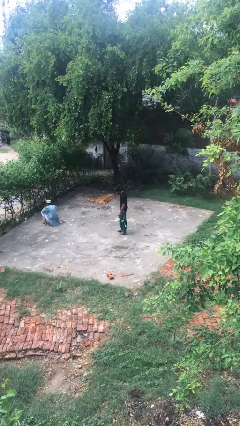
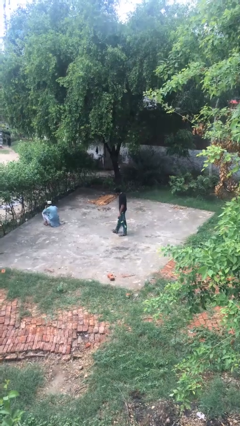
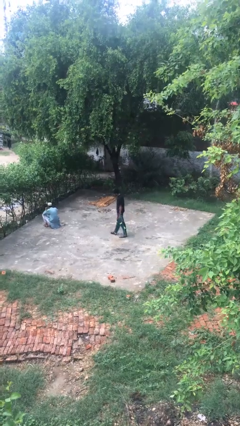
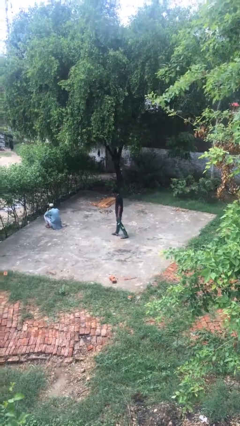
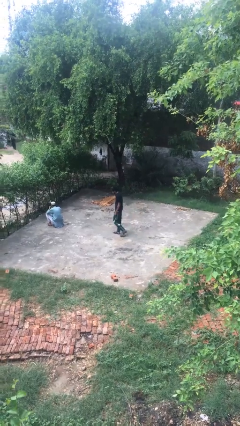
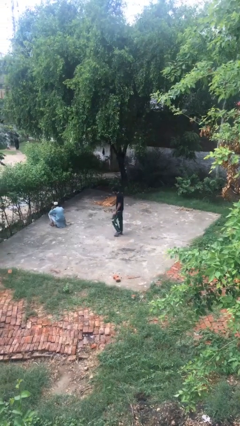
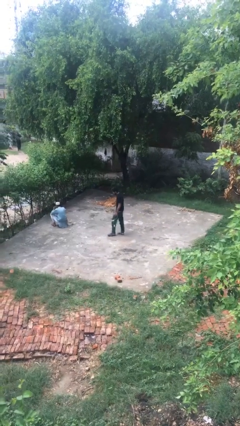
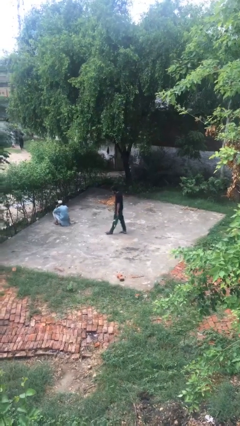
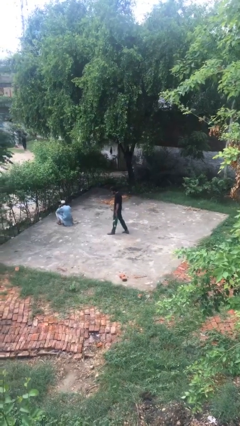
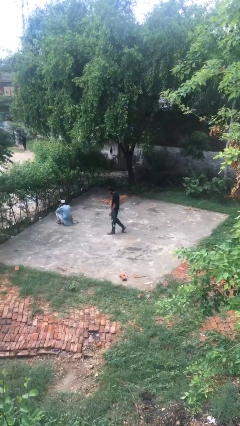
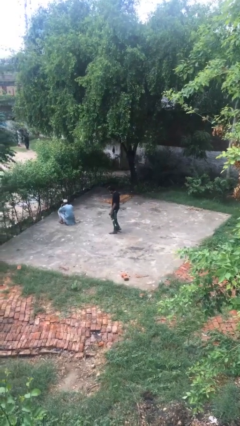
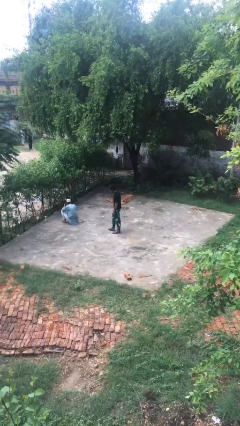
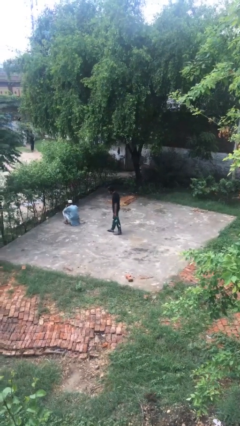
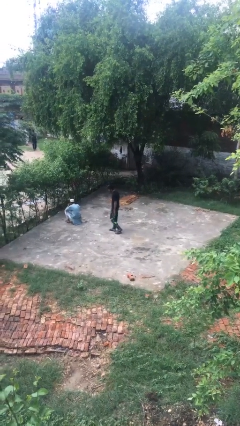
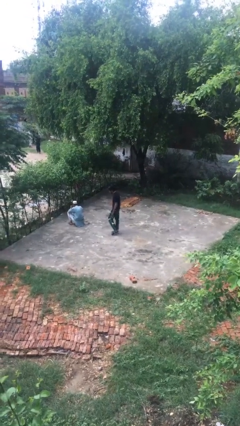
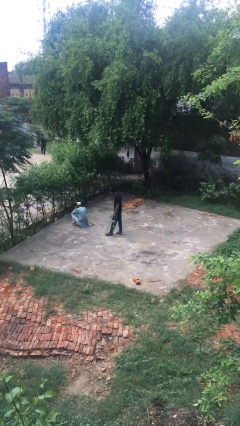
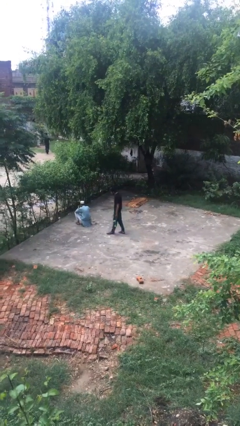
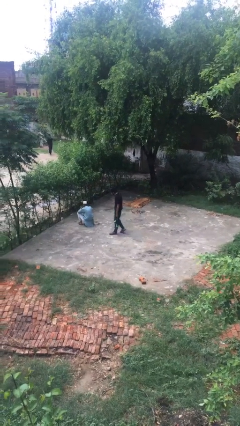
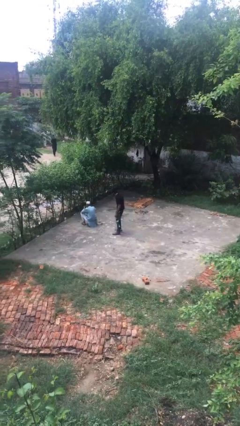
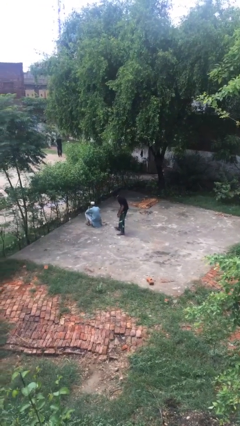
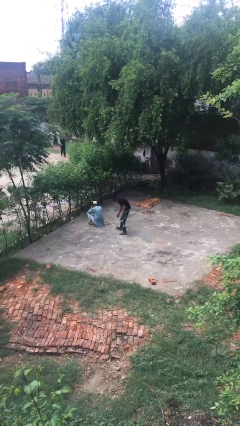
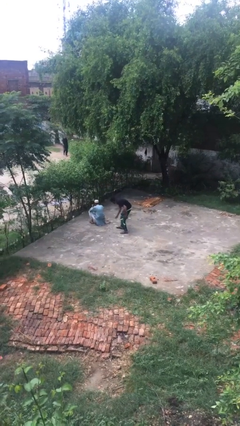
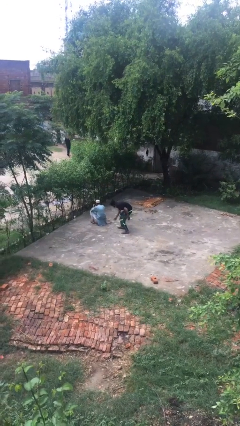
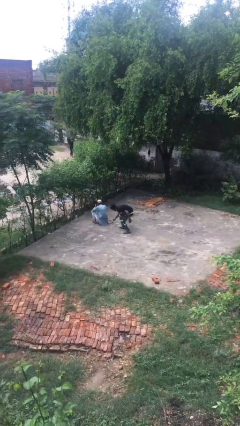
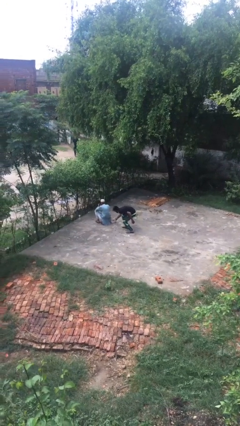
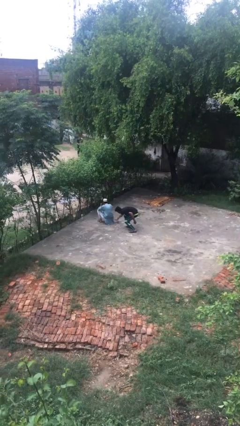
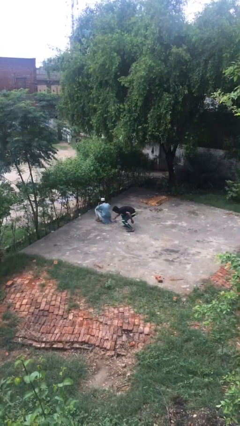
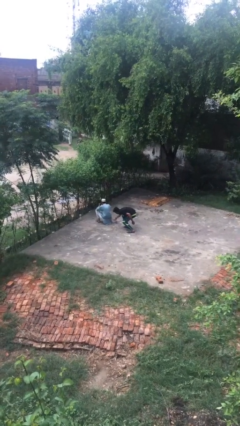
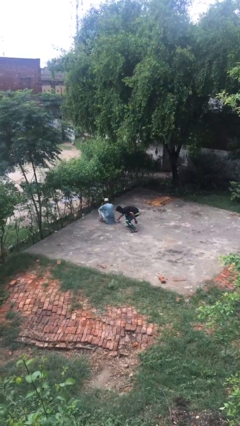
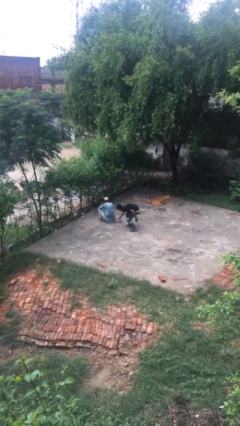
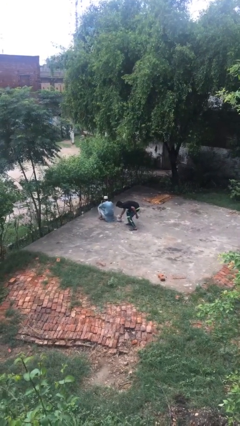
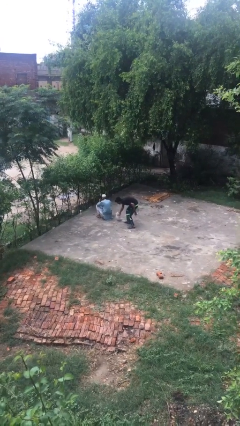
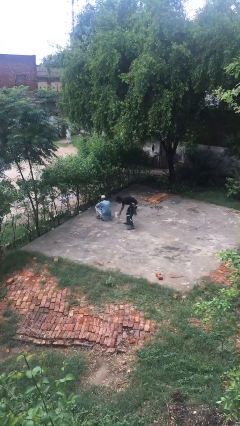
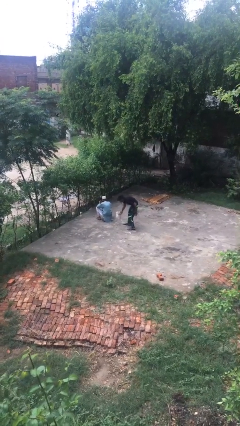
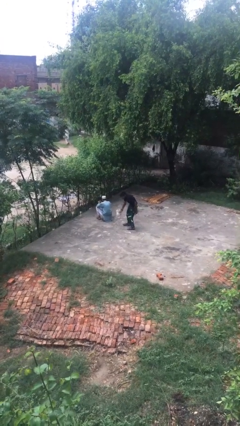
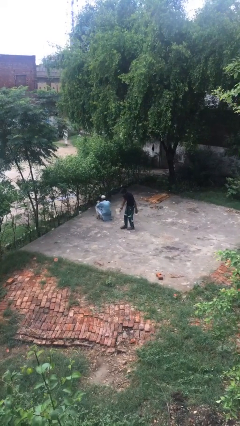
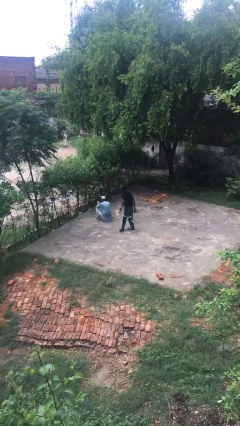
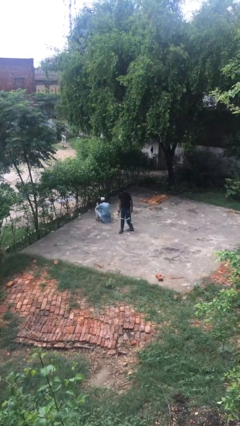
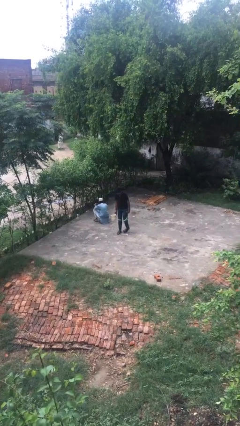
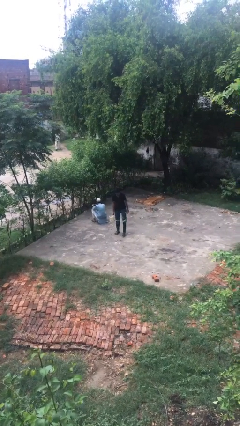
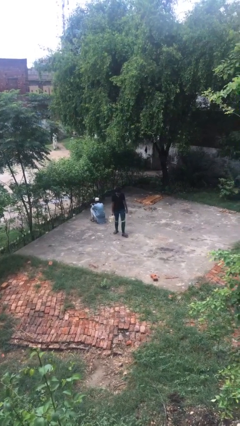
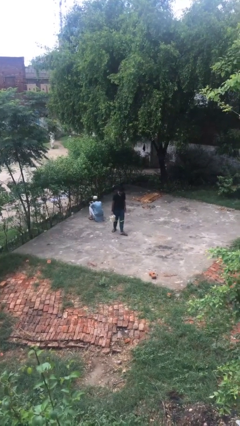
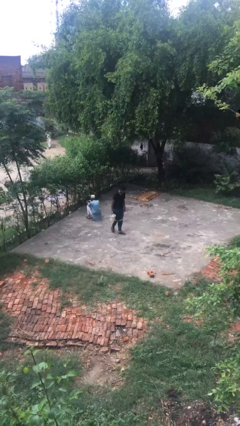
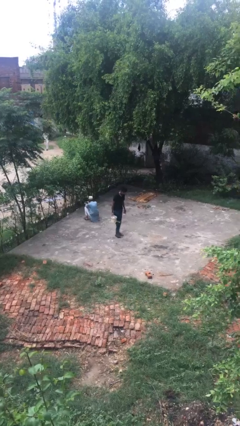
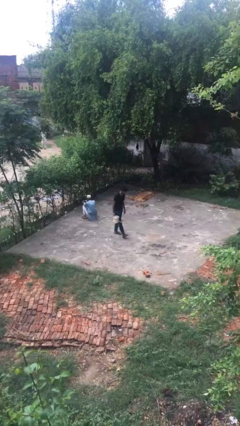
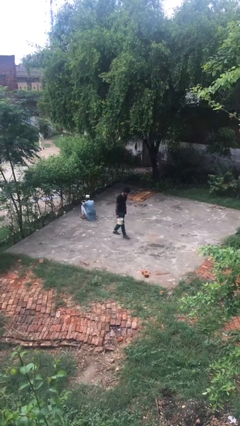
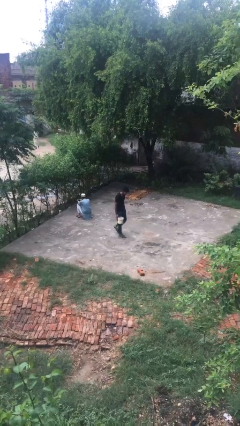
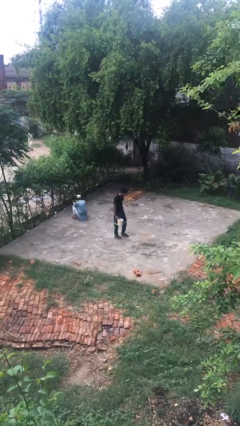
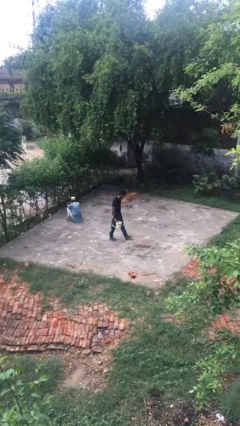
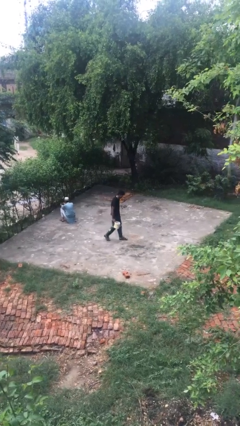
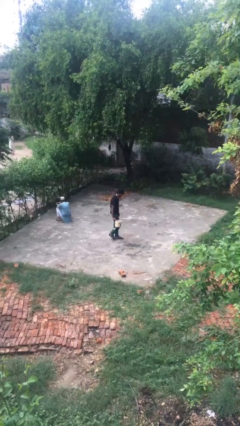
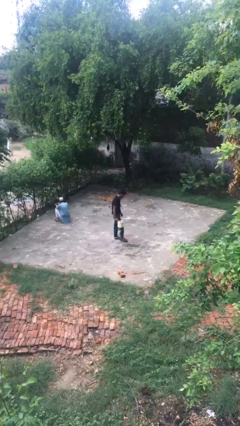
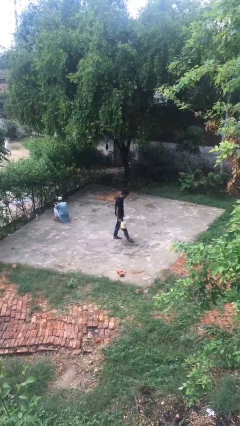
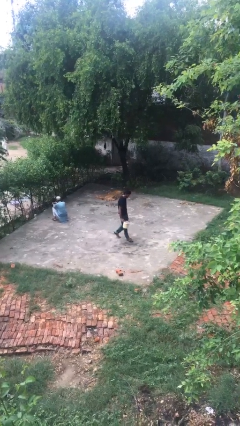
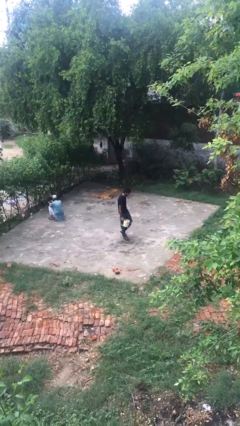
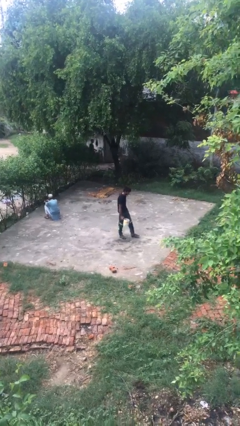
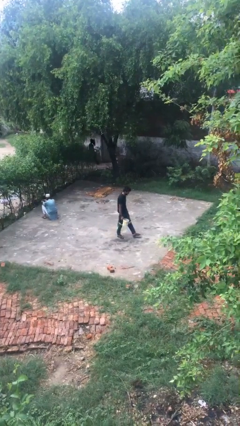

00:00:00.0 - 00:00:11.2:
person steals object from person

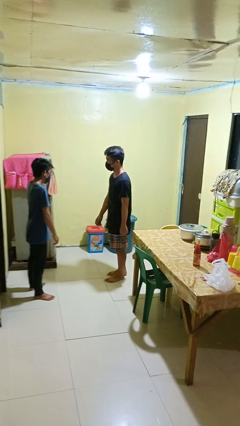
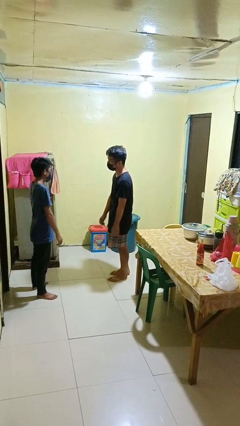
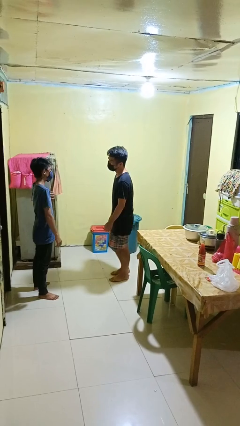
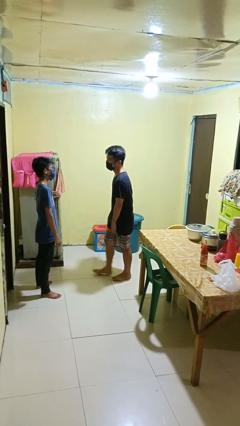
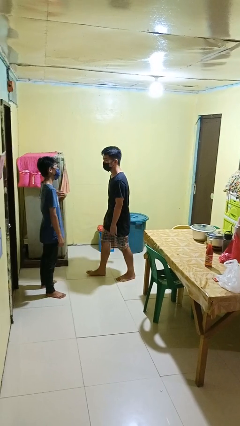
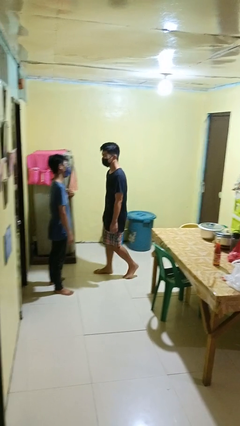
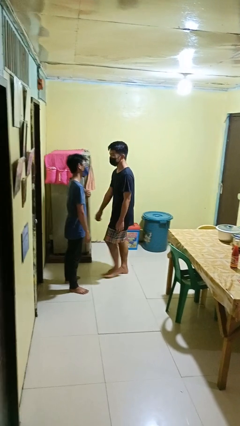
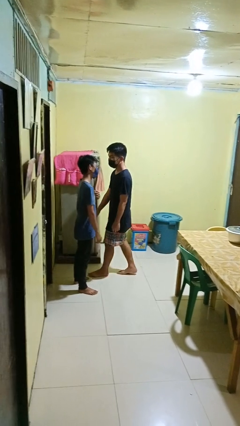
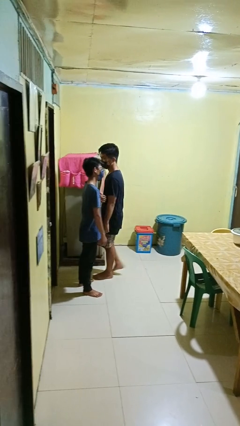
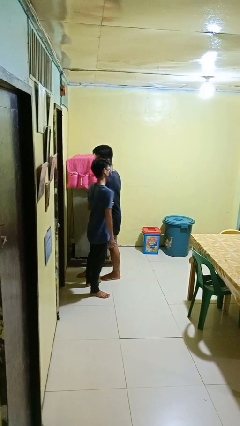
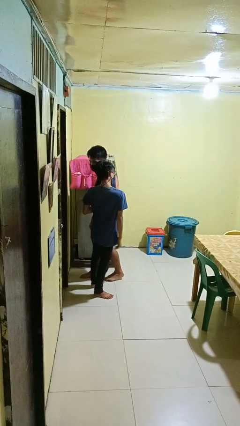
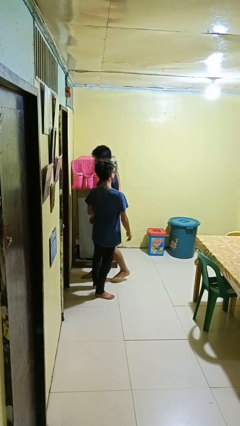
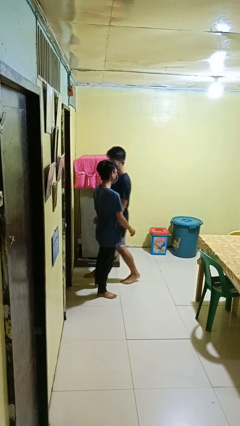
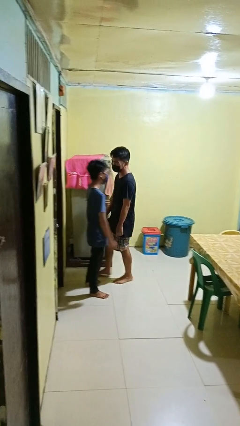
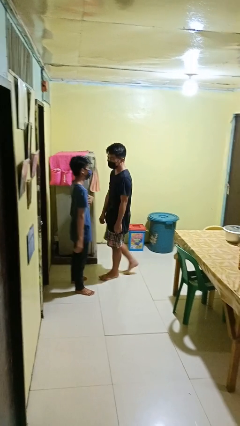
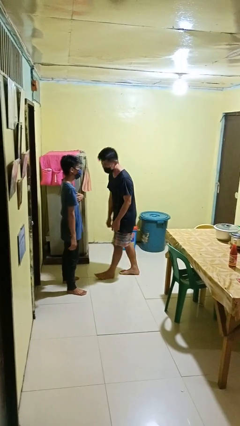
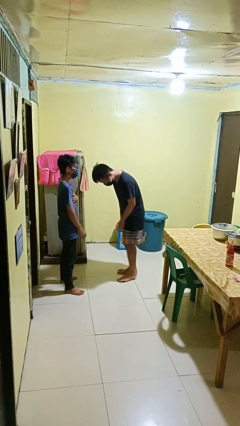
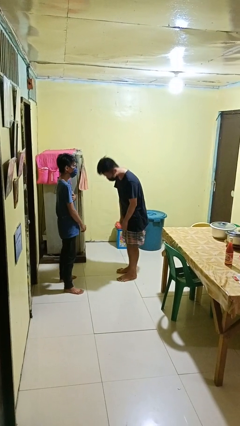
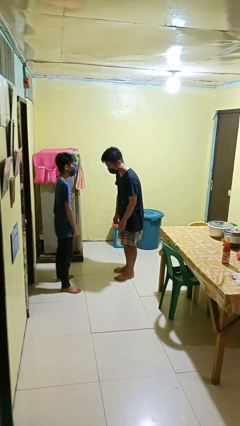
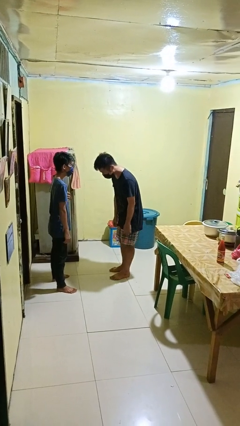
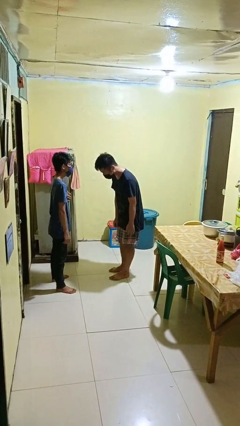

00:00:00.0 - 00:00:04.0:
person bumps into person

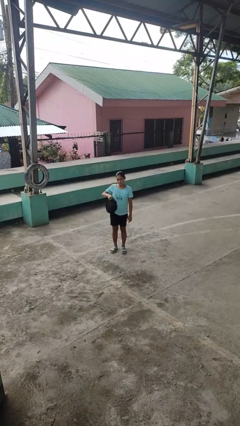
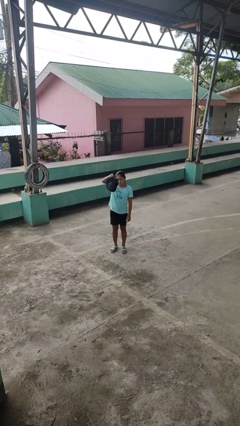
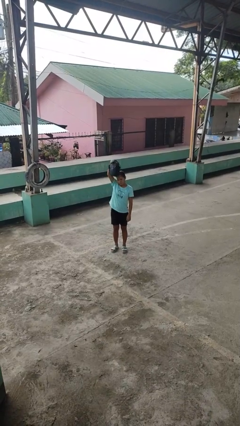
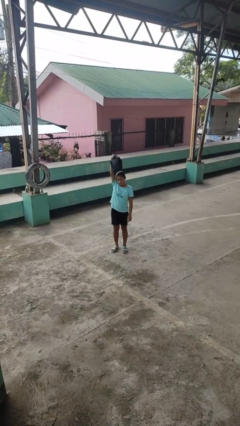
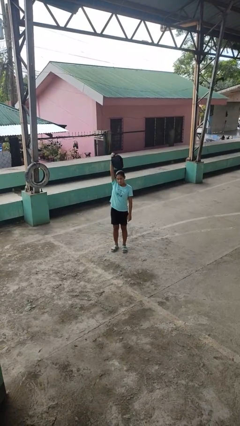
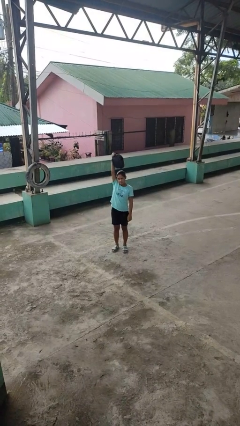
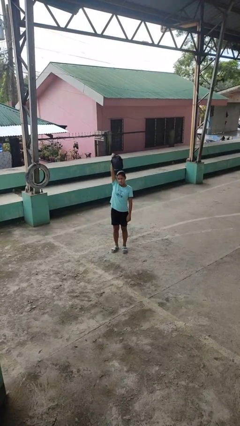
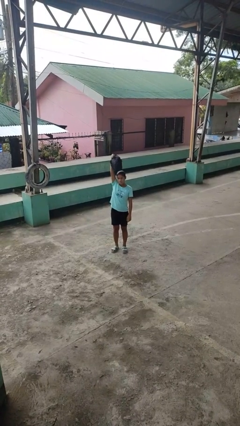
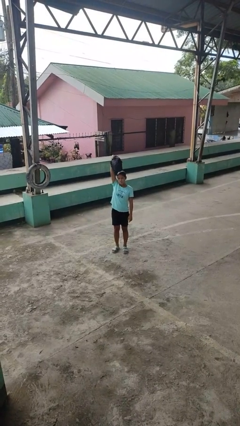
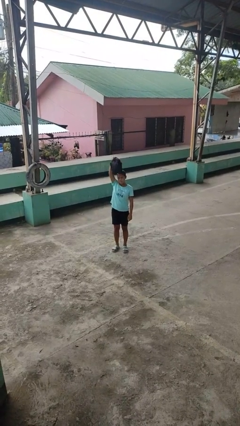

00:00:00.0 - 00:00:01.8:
person holds object above head

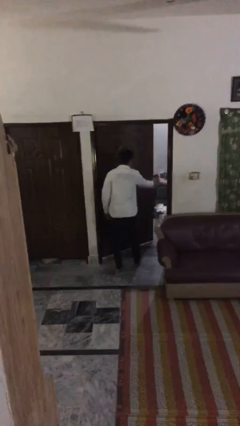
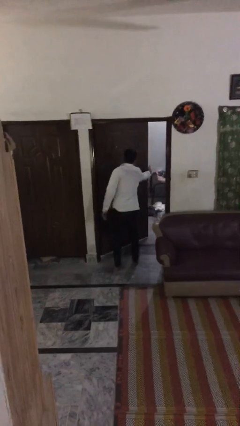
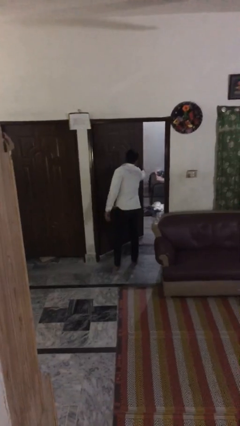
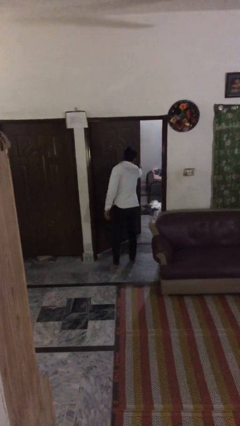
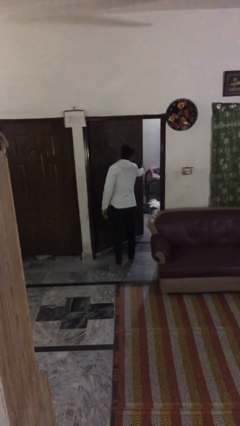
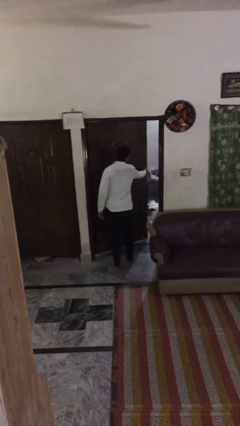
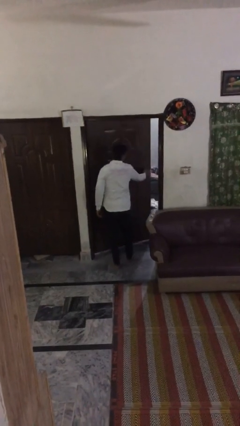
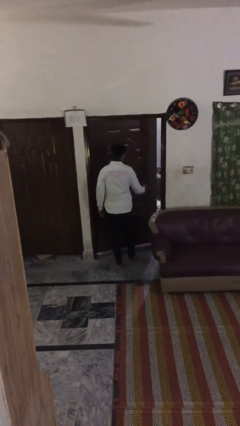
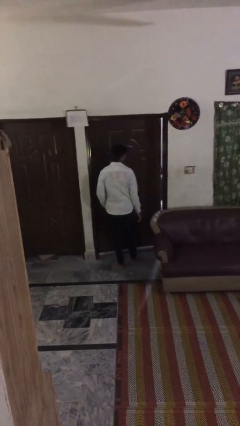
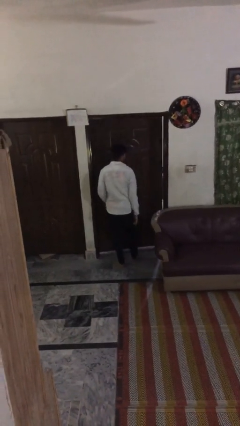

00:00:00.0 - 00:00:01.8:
person closes facility door
